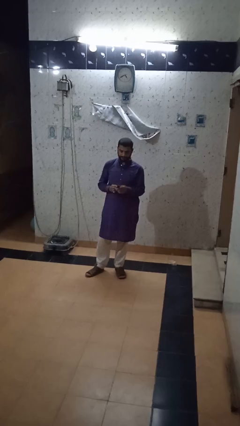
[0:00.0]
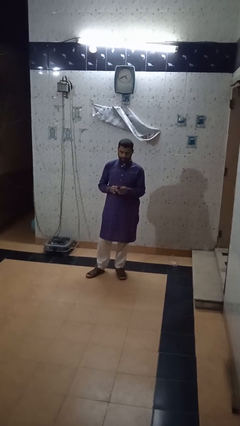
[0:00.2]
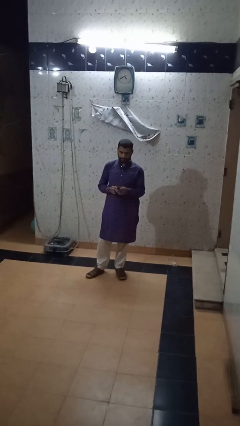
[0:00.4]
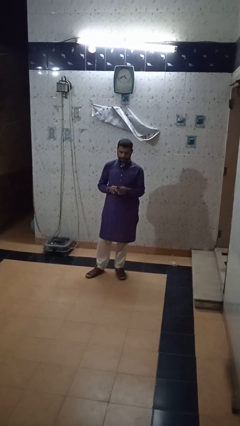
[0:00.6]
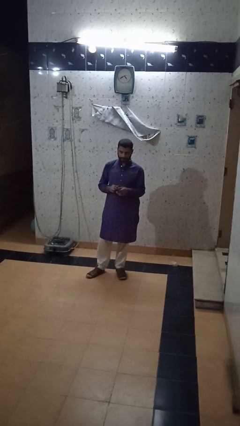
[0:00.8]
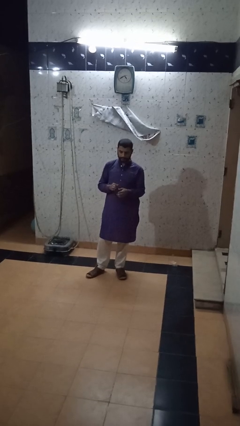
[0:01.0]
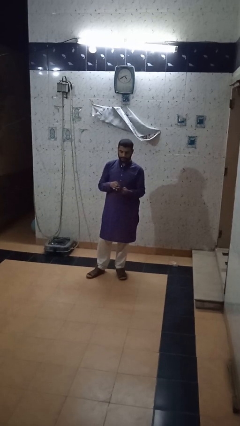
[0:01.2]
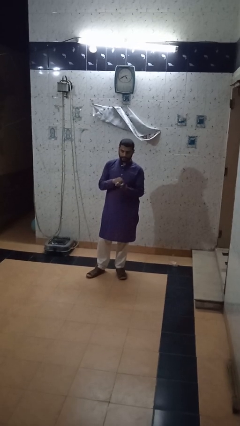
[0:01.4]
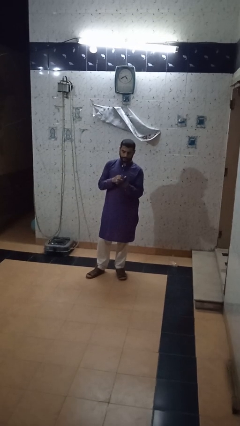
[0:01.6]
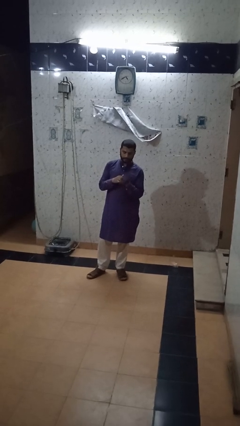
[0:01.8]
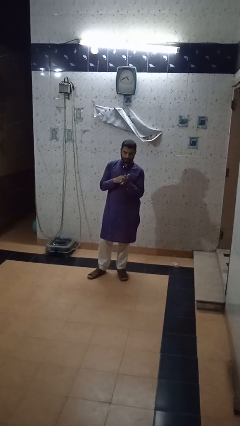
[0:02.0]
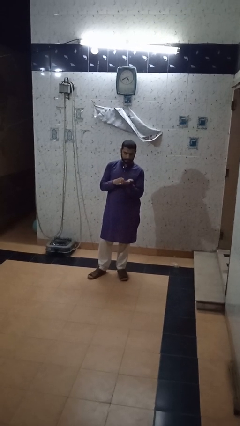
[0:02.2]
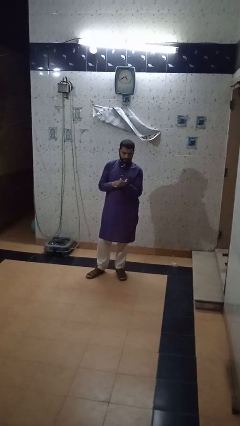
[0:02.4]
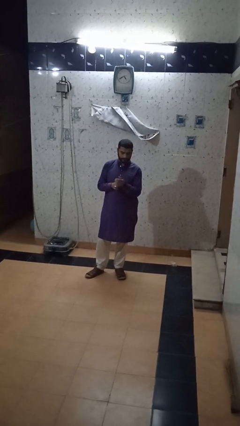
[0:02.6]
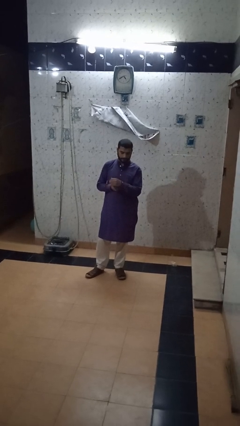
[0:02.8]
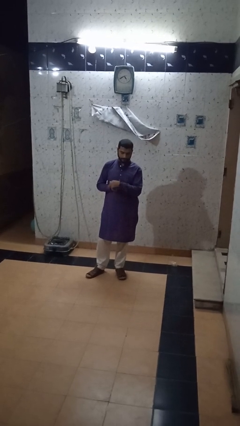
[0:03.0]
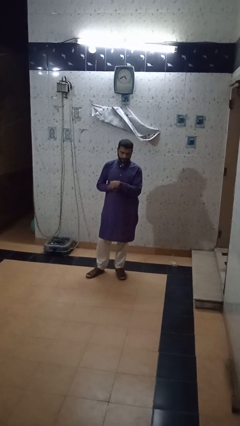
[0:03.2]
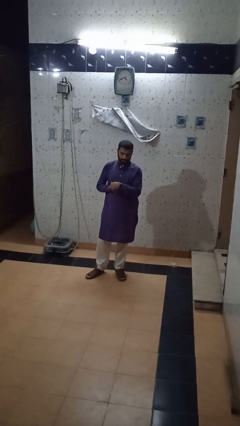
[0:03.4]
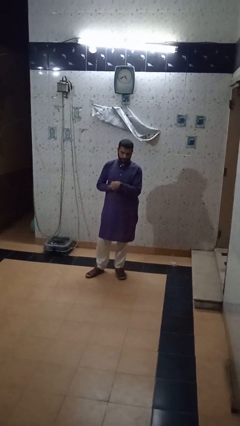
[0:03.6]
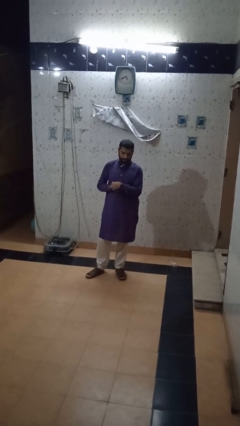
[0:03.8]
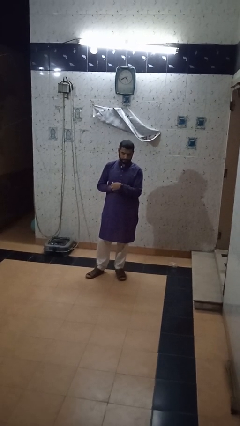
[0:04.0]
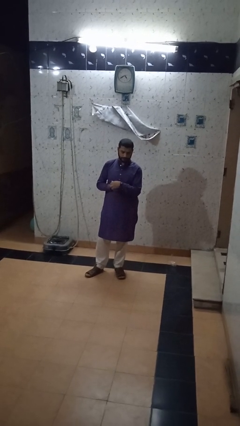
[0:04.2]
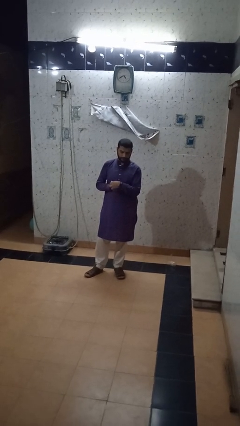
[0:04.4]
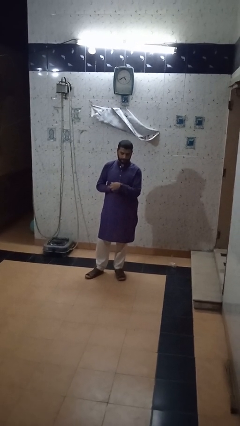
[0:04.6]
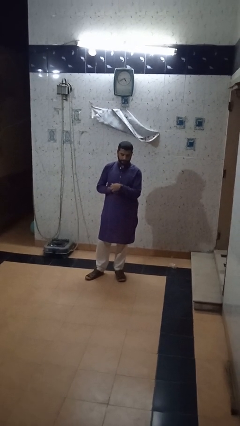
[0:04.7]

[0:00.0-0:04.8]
person puts on wristwatch

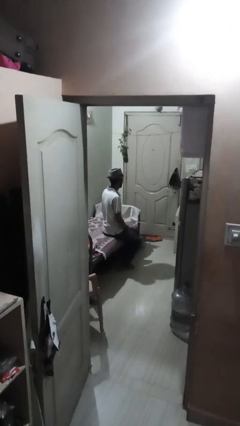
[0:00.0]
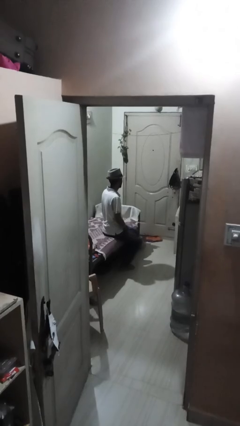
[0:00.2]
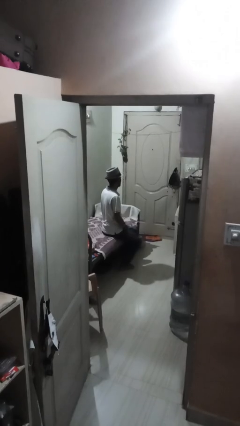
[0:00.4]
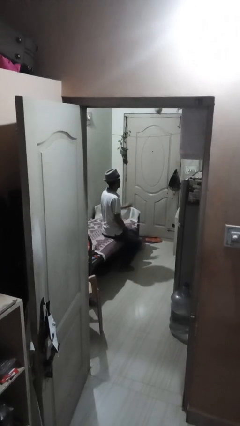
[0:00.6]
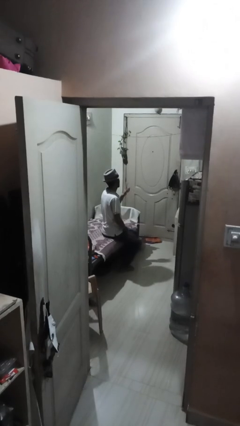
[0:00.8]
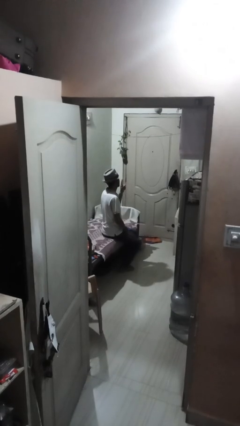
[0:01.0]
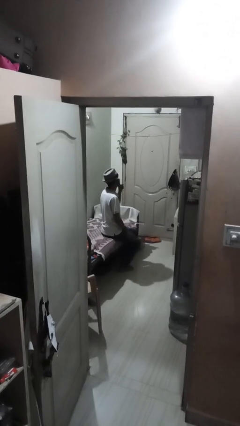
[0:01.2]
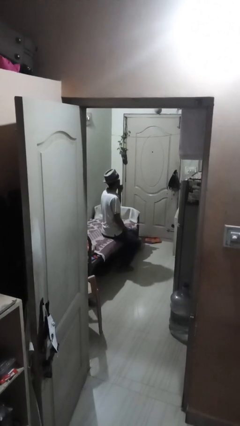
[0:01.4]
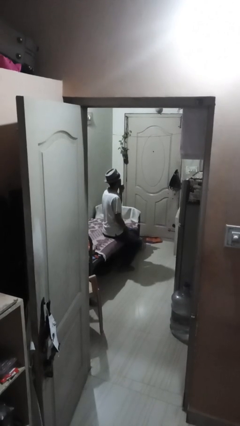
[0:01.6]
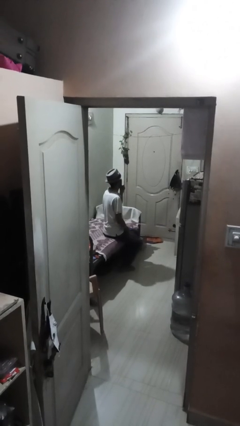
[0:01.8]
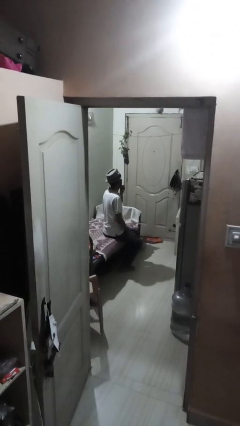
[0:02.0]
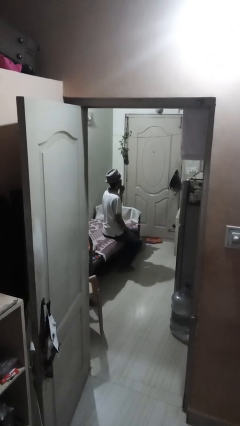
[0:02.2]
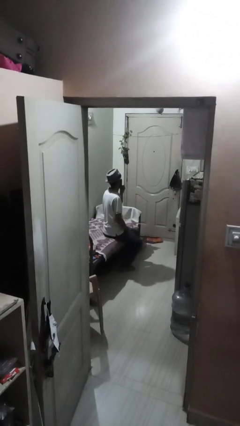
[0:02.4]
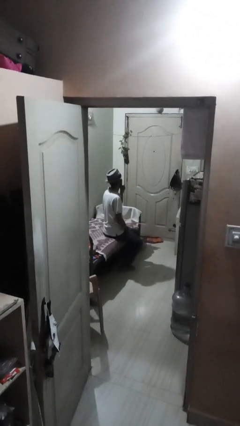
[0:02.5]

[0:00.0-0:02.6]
person gestures be quiet

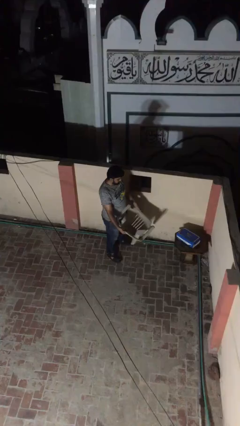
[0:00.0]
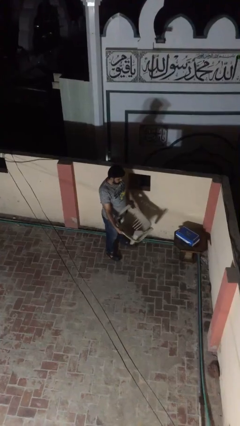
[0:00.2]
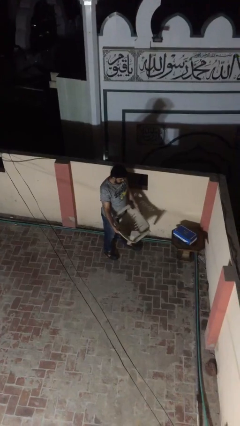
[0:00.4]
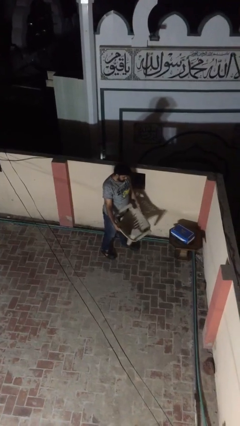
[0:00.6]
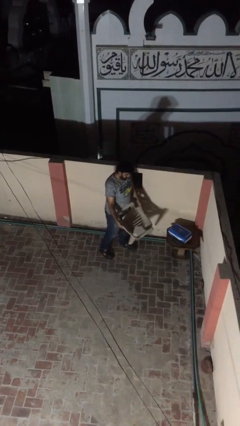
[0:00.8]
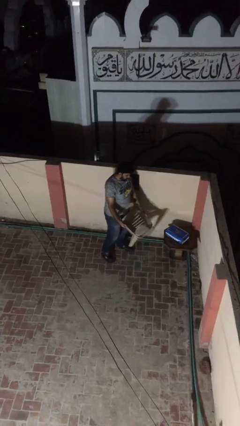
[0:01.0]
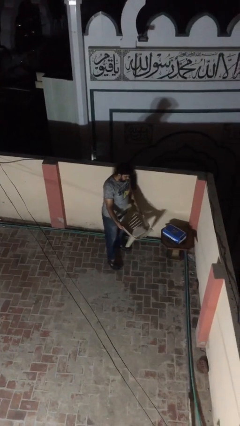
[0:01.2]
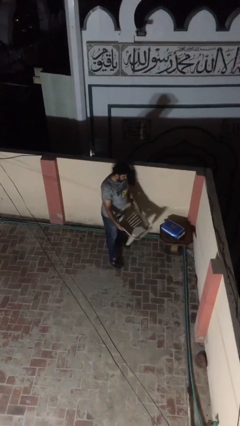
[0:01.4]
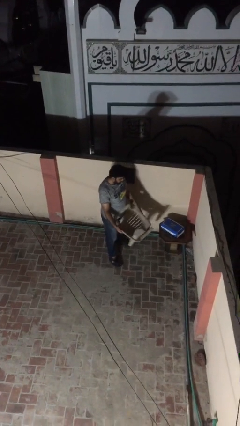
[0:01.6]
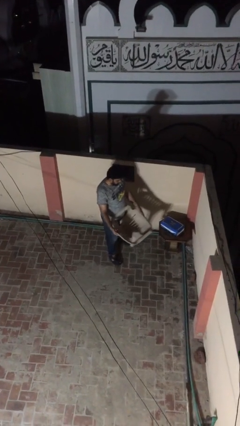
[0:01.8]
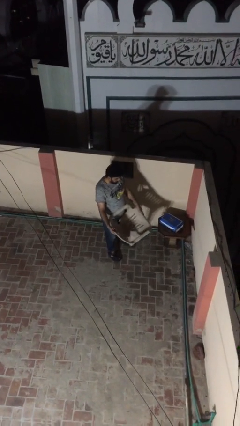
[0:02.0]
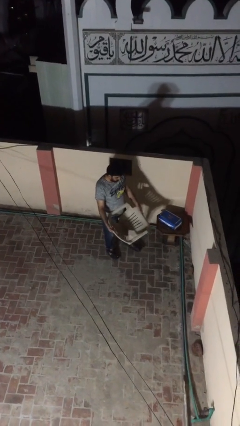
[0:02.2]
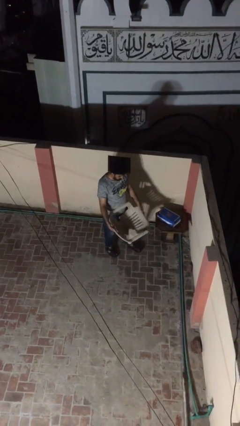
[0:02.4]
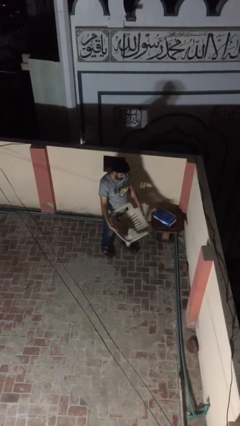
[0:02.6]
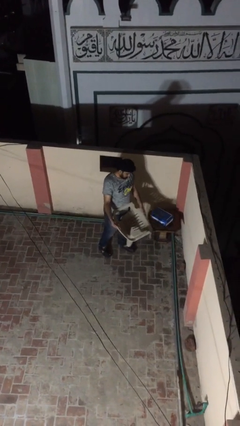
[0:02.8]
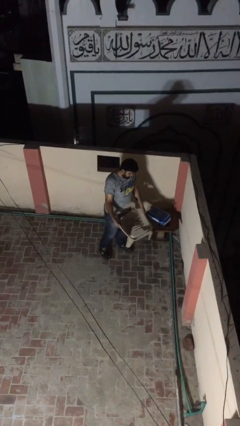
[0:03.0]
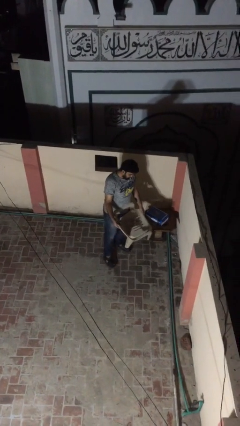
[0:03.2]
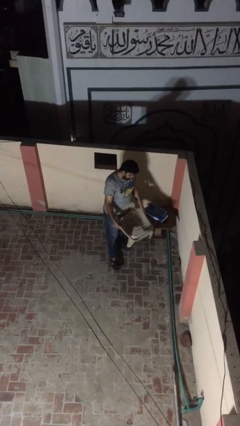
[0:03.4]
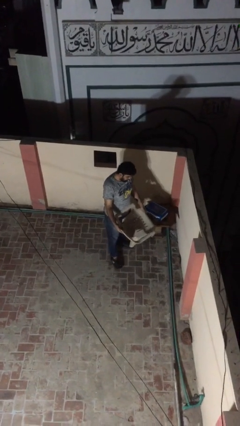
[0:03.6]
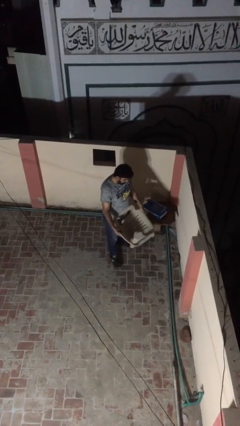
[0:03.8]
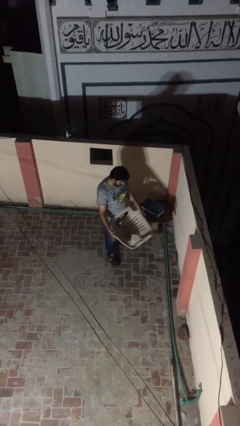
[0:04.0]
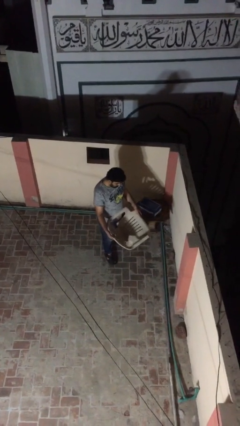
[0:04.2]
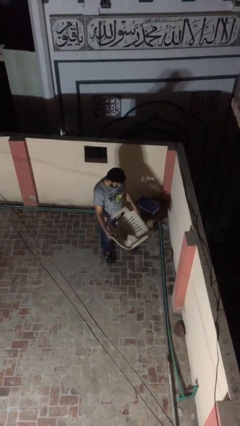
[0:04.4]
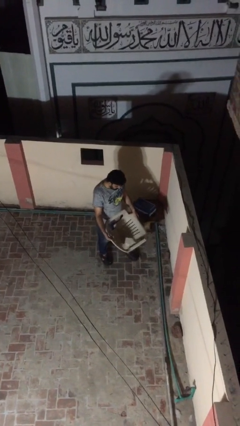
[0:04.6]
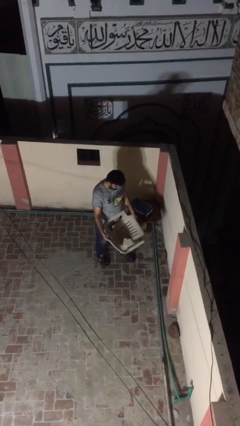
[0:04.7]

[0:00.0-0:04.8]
person carries heavy object

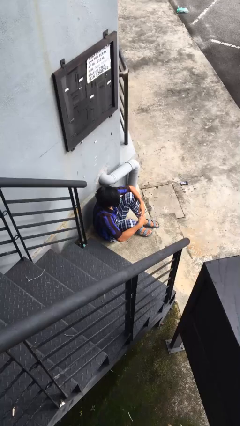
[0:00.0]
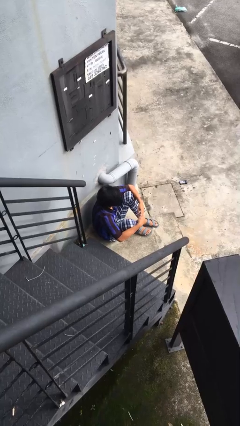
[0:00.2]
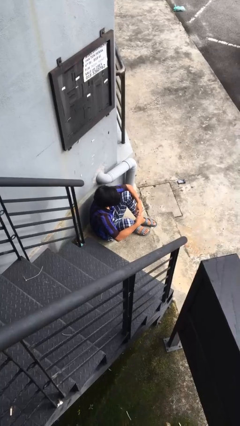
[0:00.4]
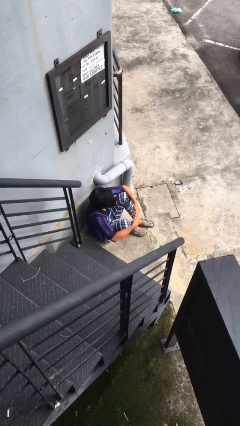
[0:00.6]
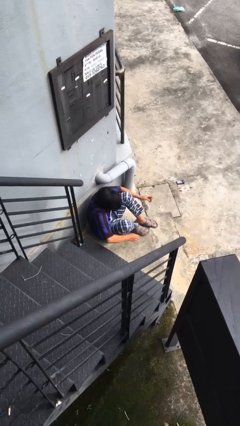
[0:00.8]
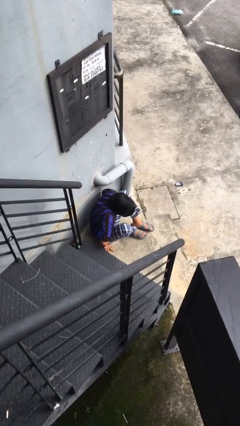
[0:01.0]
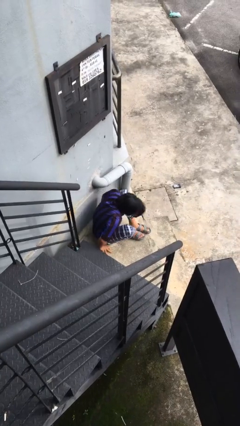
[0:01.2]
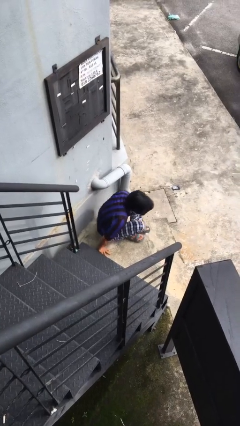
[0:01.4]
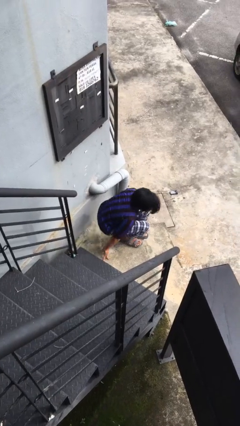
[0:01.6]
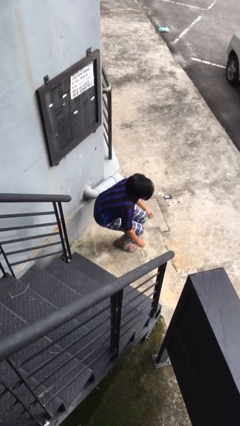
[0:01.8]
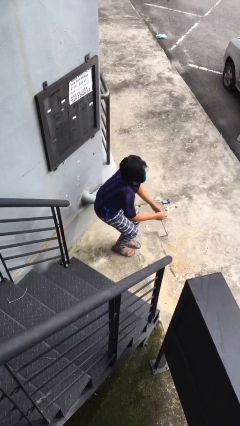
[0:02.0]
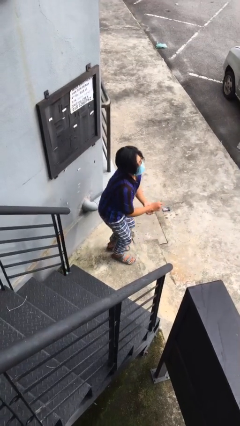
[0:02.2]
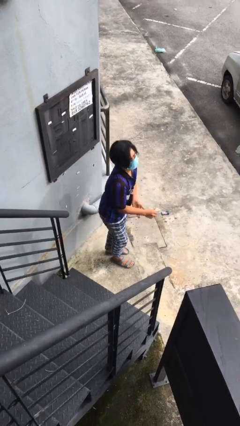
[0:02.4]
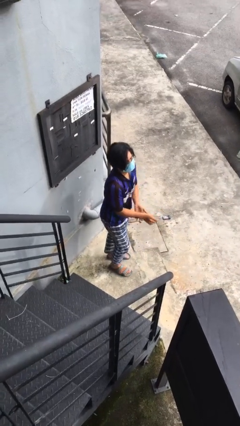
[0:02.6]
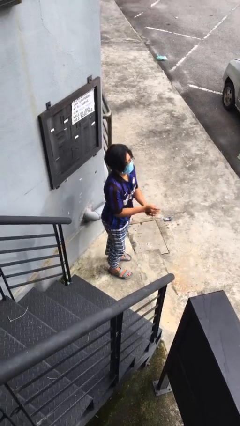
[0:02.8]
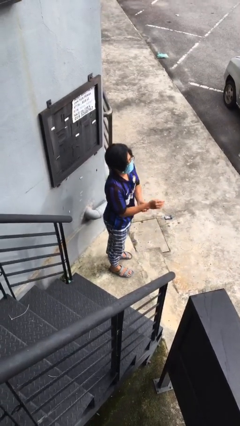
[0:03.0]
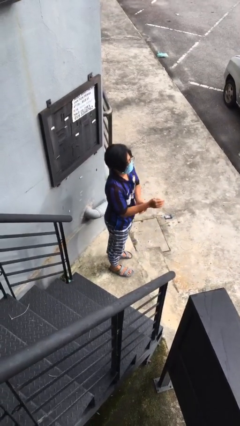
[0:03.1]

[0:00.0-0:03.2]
person stands up

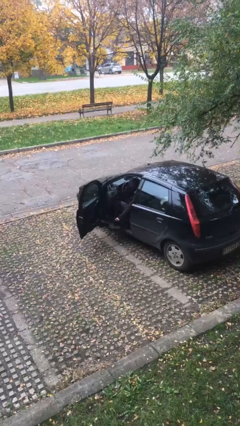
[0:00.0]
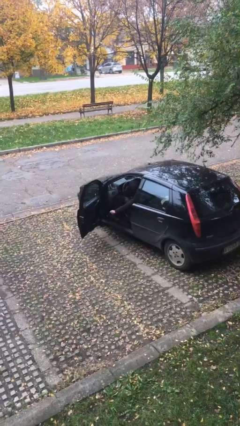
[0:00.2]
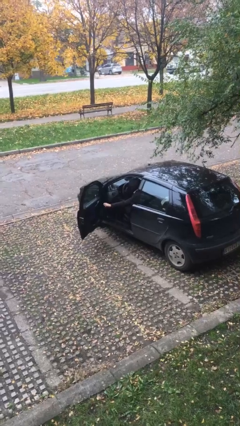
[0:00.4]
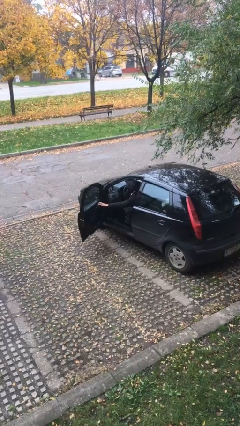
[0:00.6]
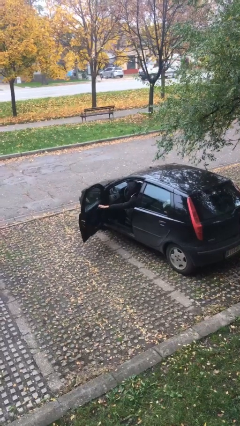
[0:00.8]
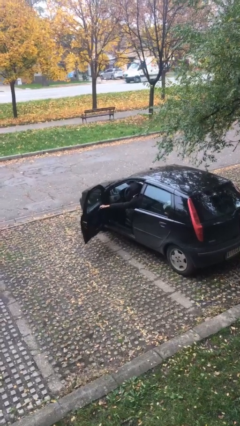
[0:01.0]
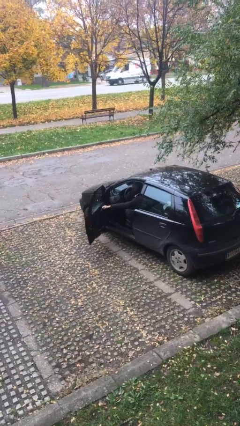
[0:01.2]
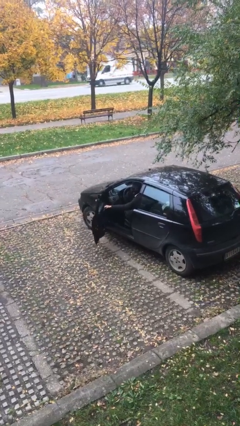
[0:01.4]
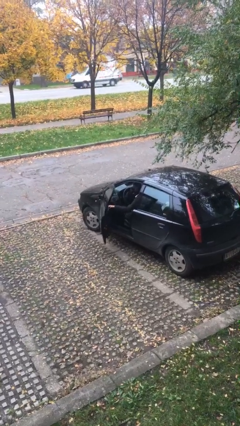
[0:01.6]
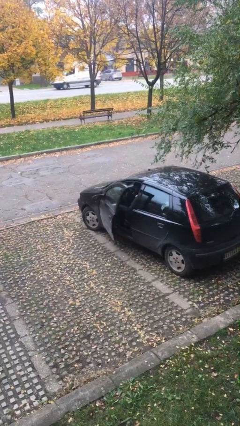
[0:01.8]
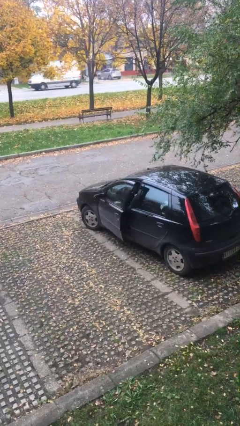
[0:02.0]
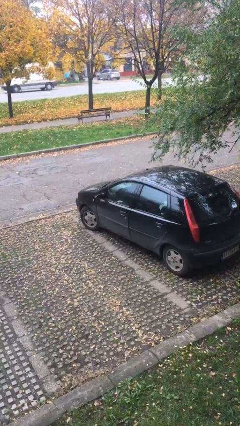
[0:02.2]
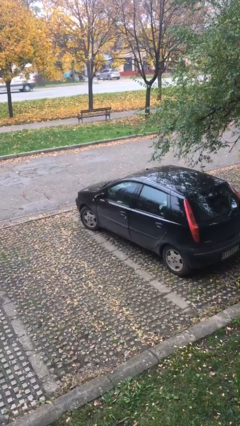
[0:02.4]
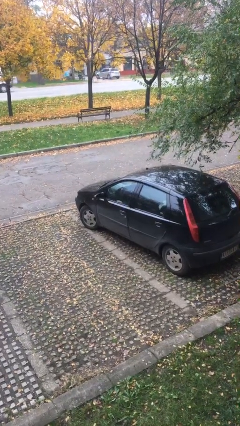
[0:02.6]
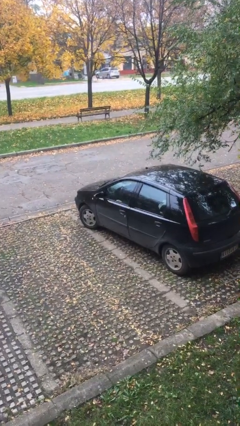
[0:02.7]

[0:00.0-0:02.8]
person closes car door
